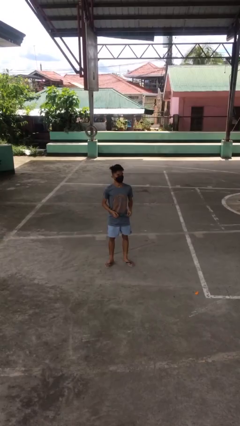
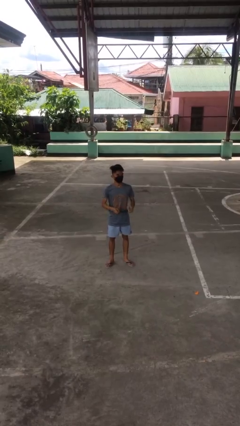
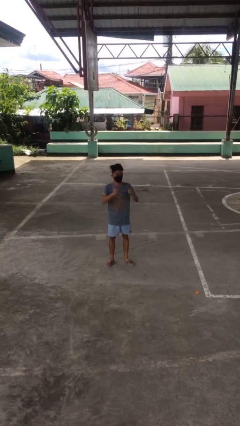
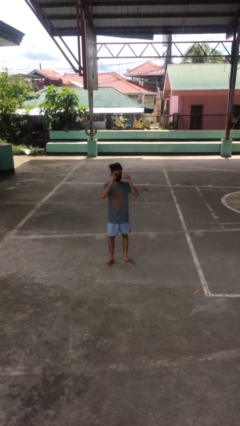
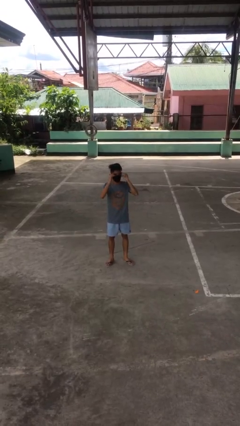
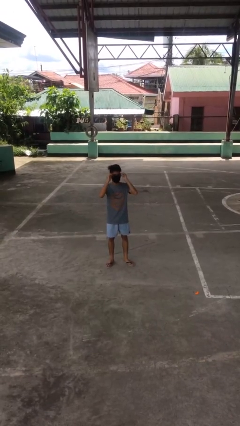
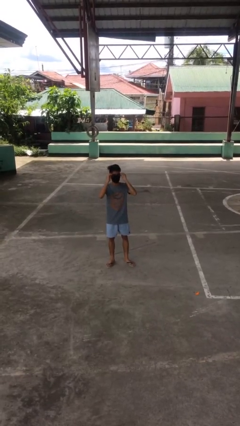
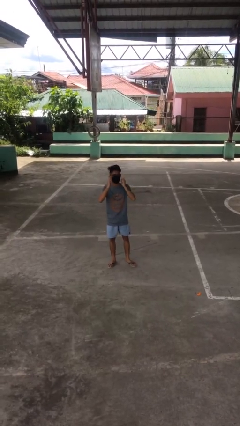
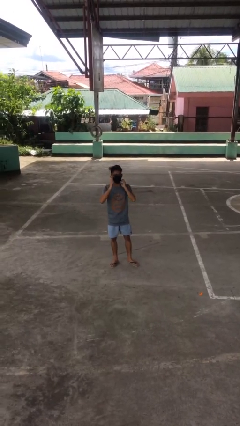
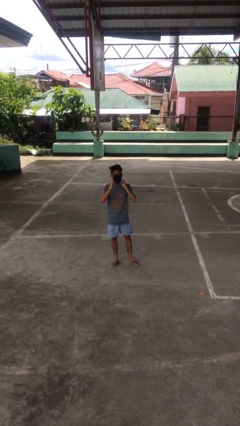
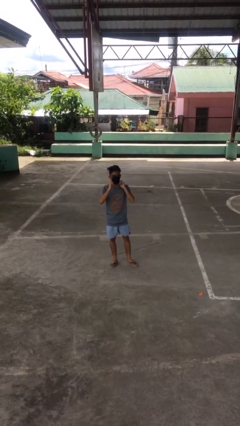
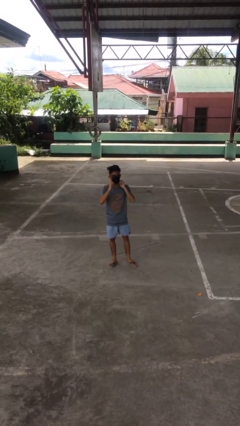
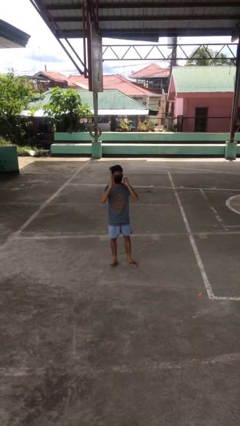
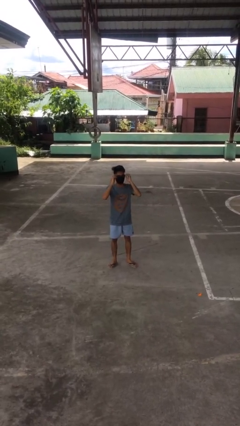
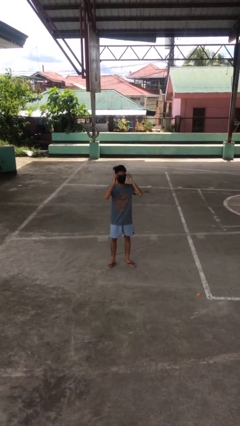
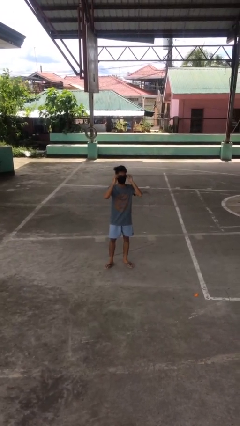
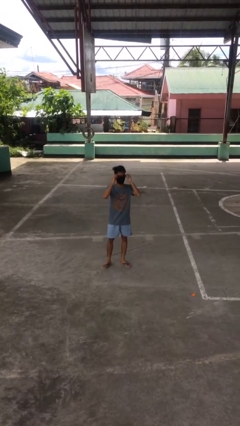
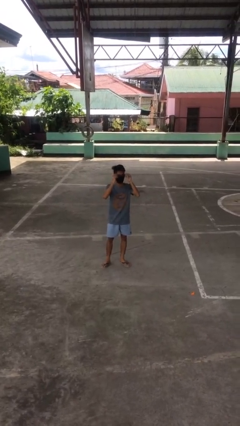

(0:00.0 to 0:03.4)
person puts on glasses

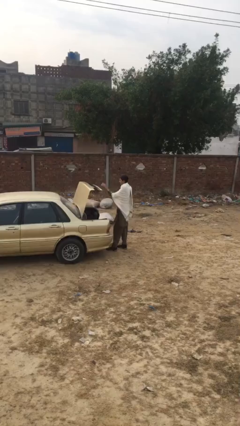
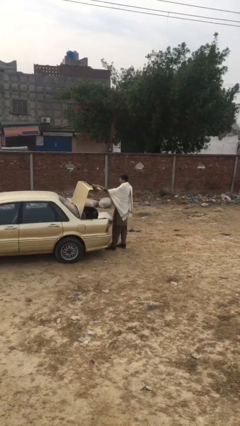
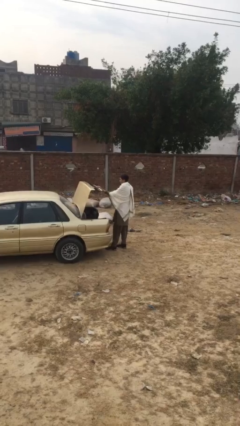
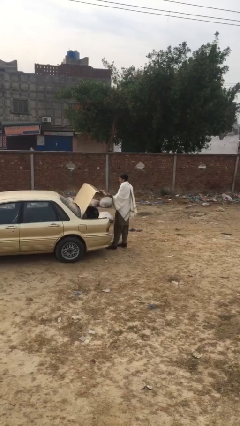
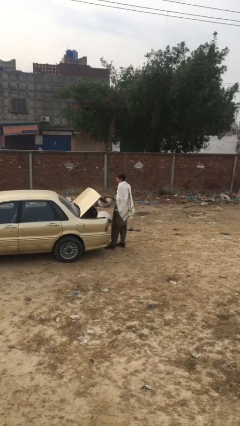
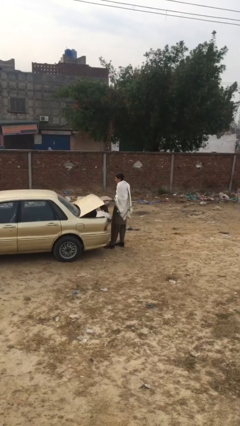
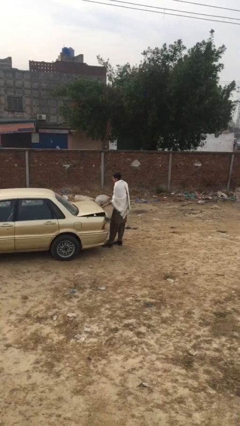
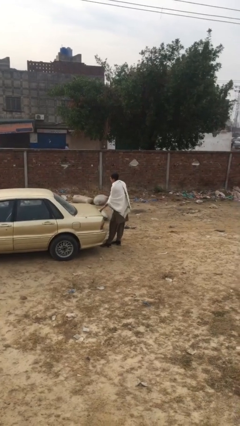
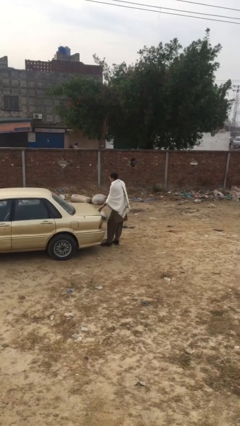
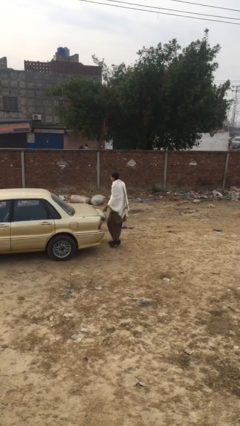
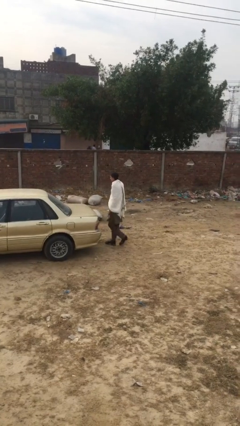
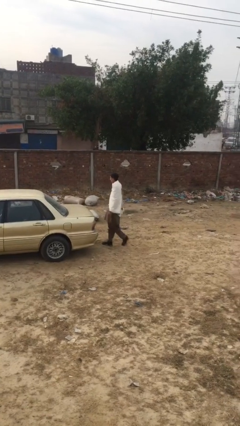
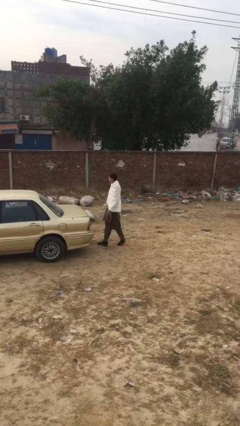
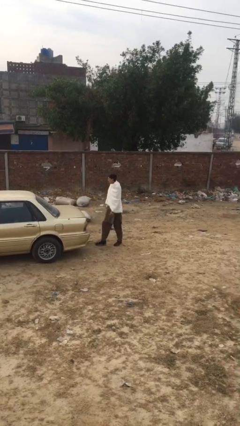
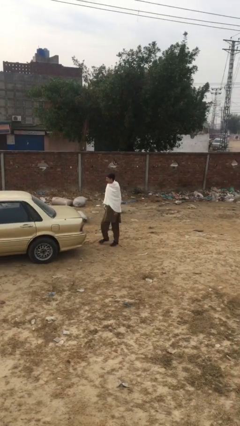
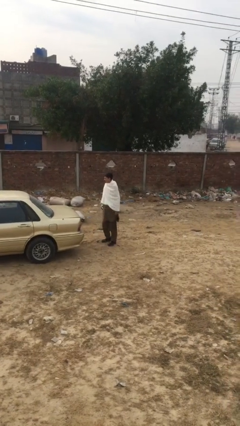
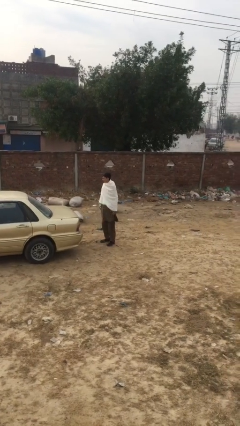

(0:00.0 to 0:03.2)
person closes car trunk

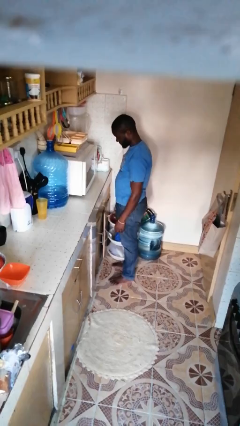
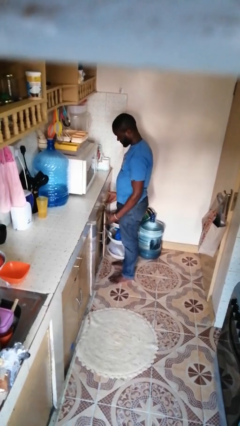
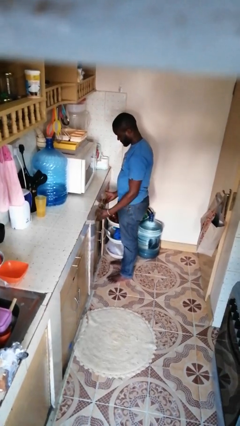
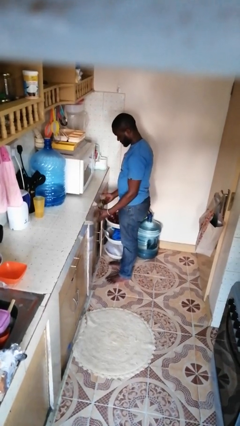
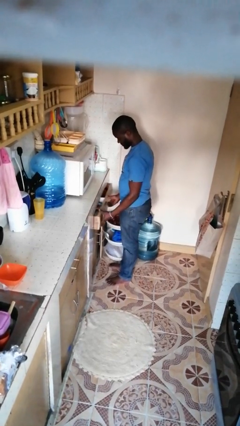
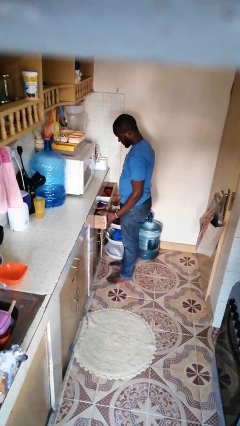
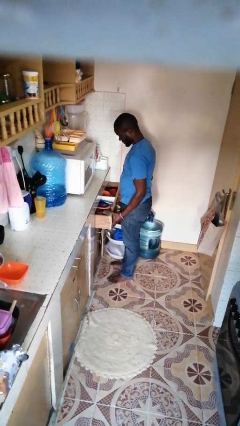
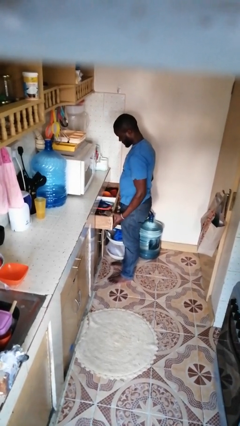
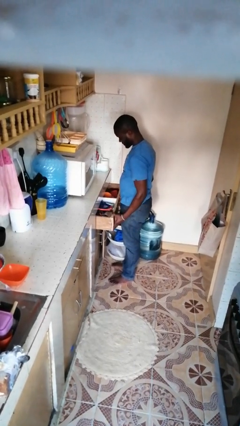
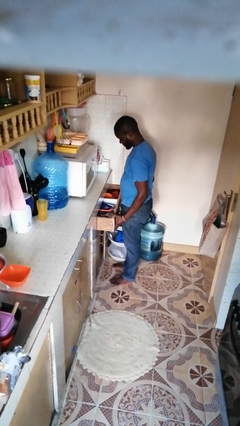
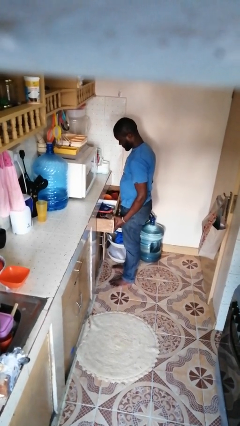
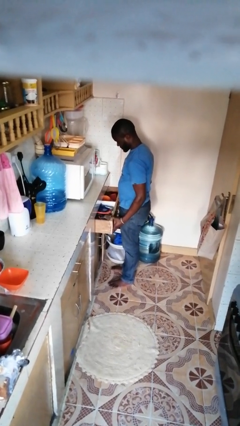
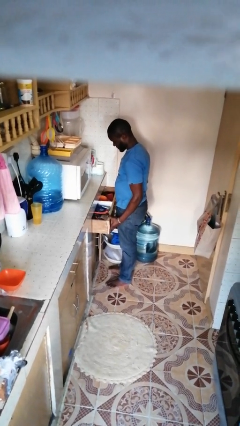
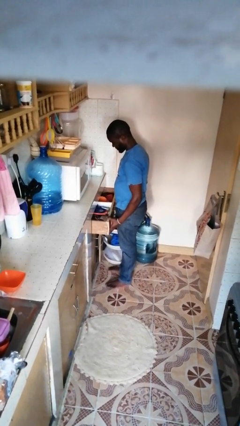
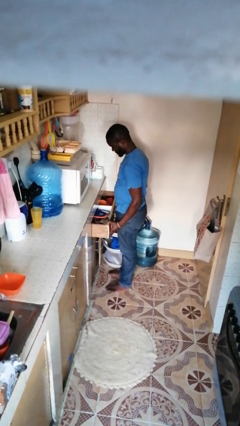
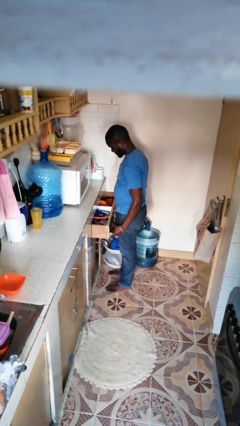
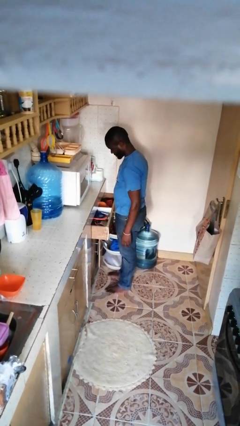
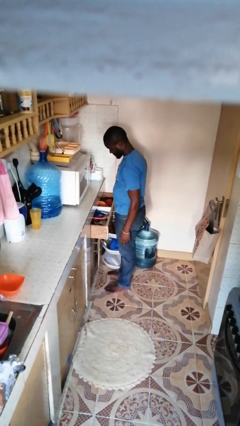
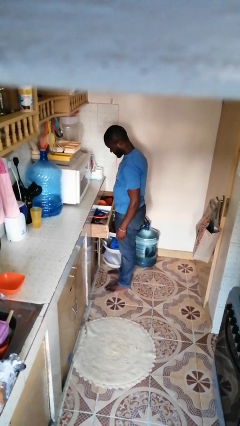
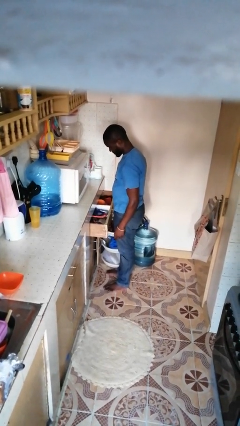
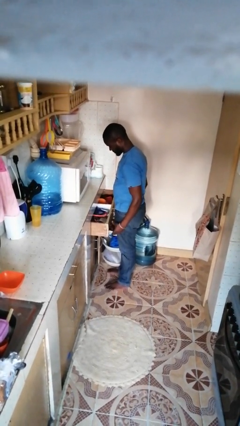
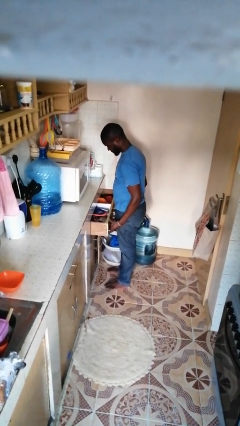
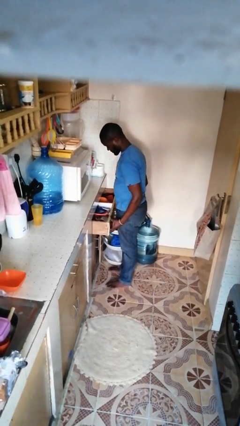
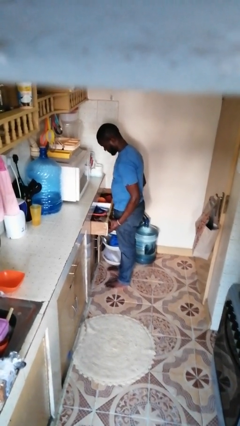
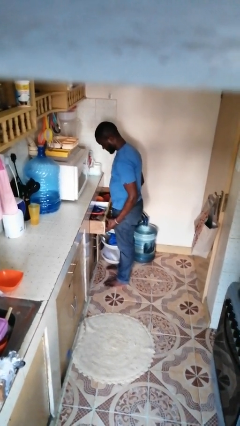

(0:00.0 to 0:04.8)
person opens kitchen drawer

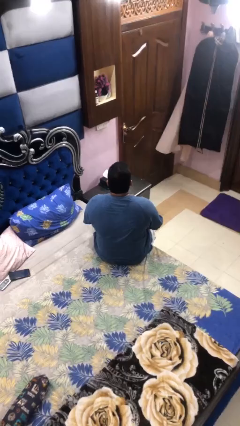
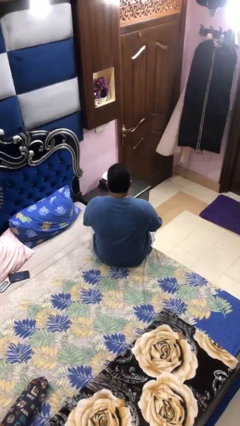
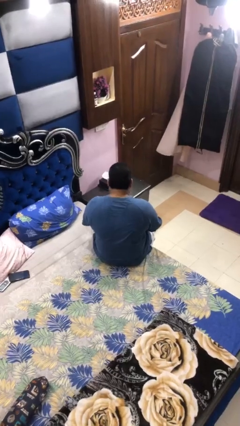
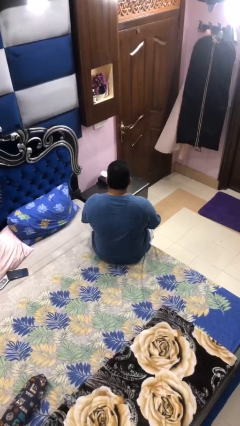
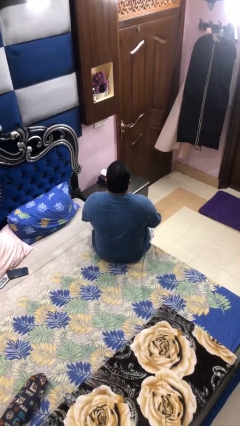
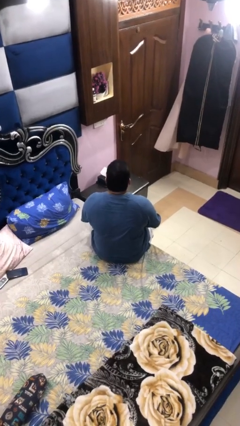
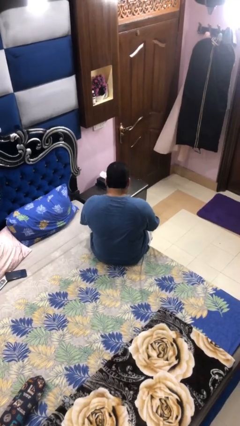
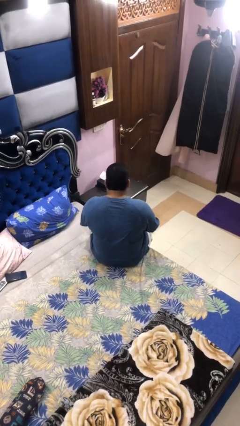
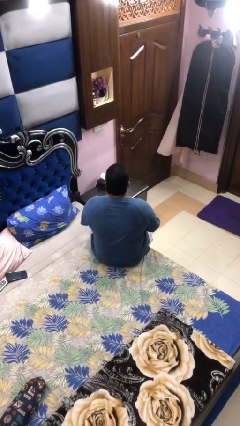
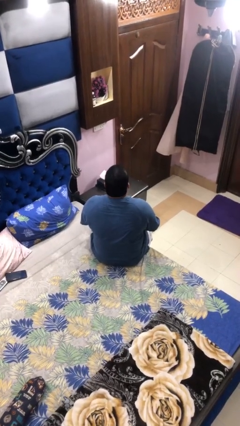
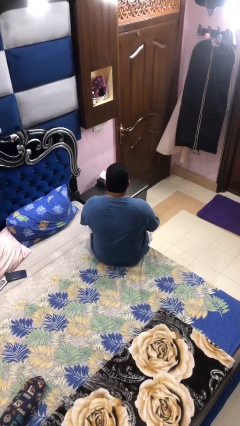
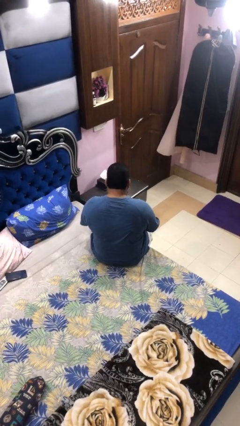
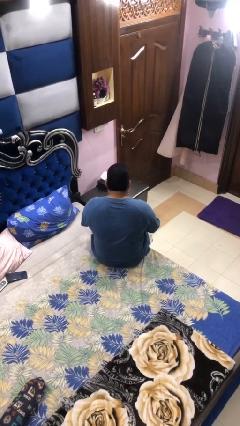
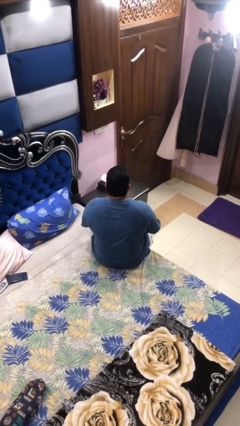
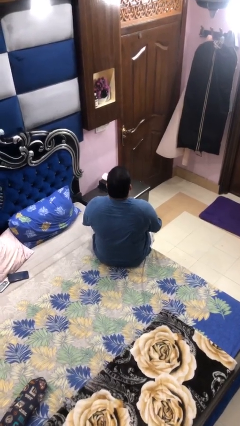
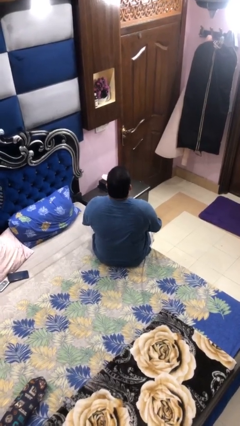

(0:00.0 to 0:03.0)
person nods head

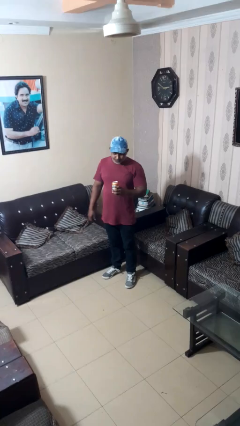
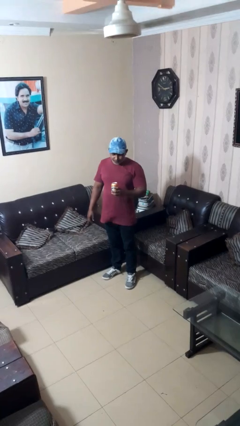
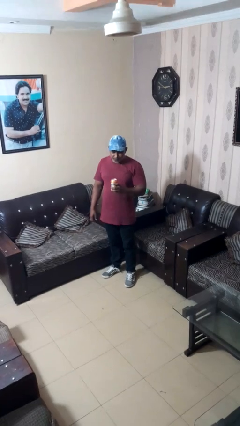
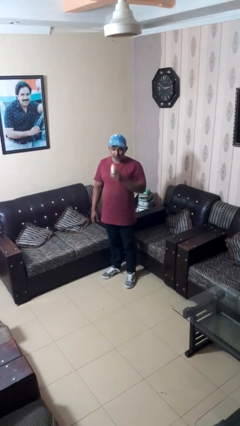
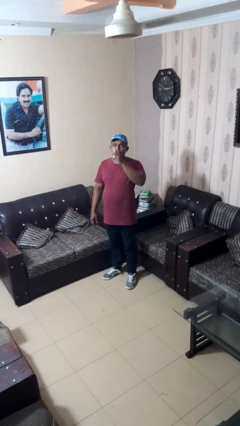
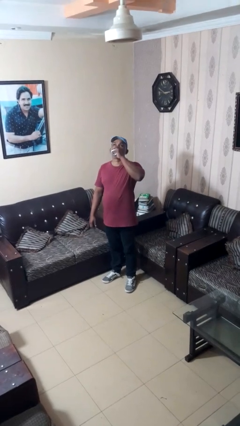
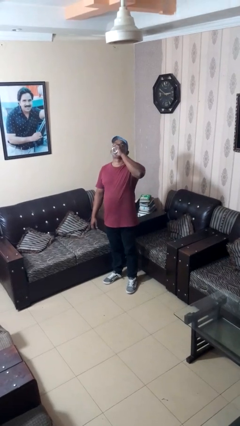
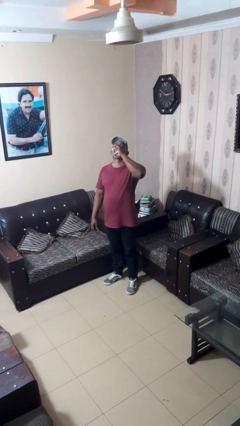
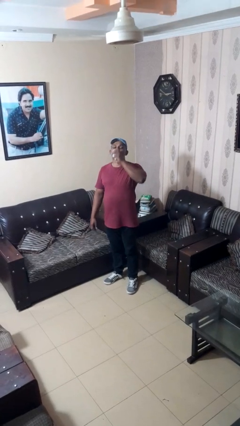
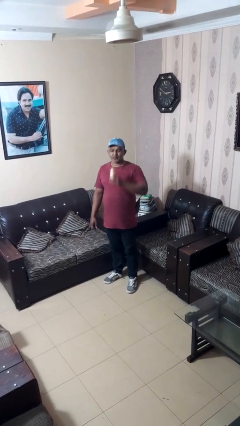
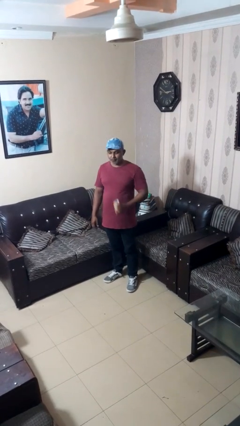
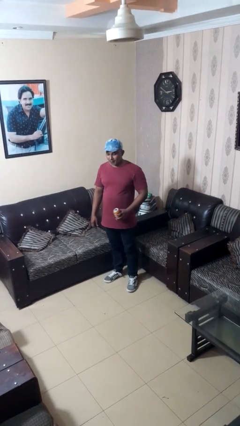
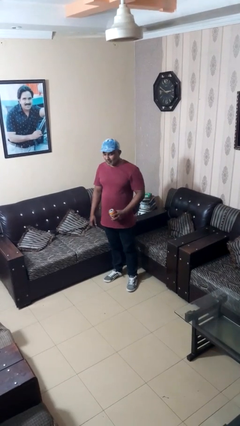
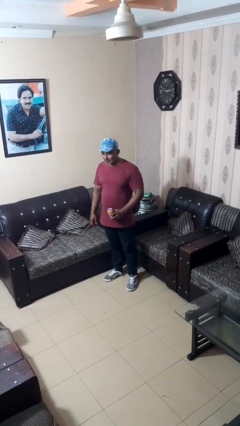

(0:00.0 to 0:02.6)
person drinks from beverage can

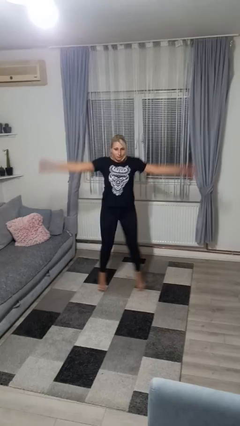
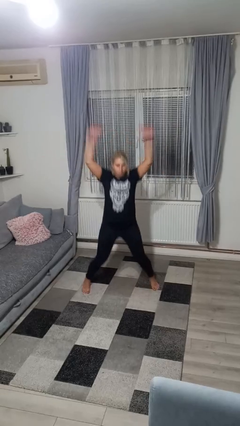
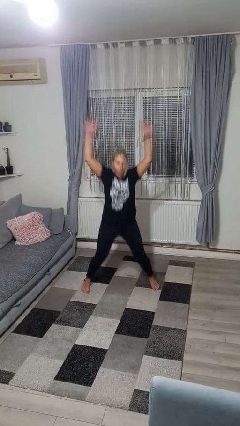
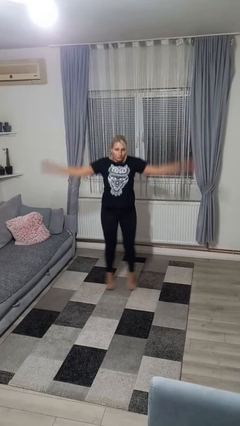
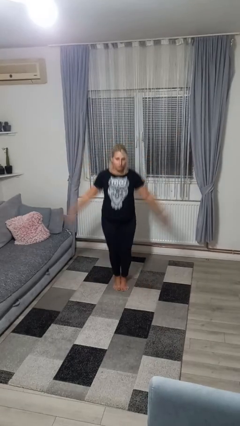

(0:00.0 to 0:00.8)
person exercises with jumping jacks
